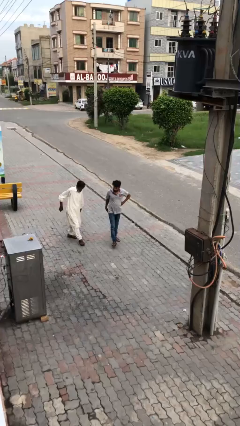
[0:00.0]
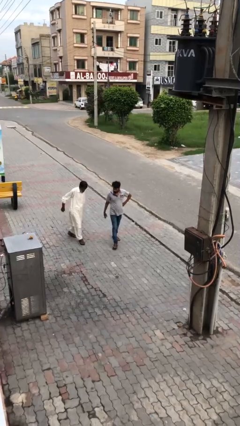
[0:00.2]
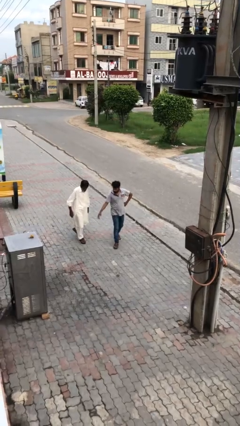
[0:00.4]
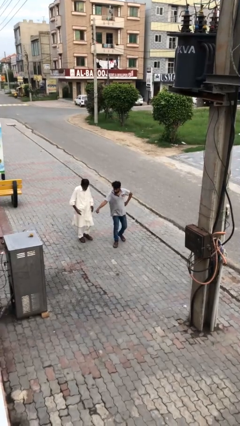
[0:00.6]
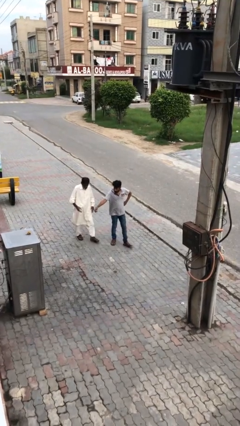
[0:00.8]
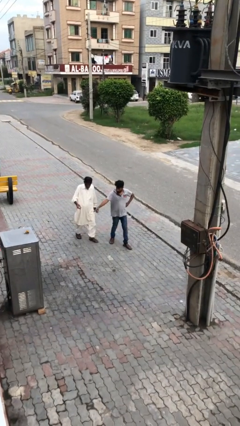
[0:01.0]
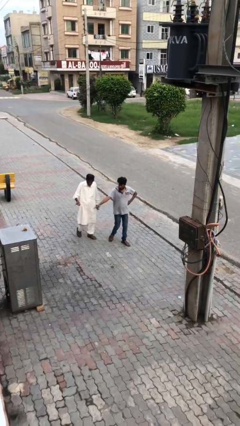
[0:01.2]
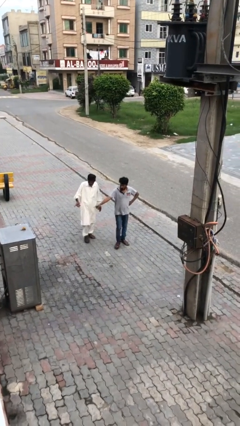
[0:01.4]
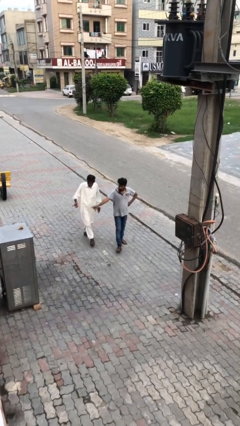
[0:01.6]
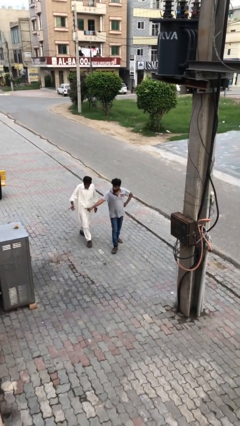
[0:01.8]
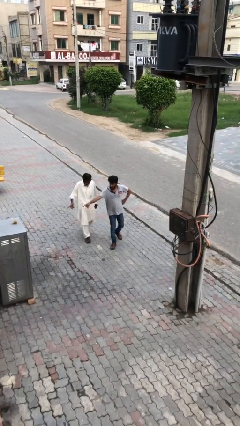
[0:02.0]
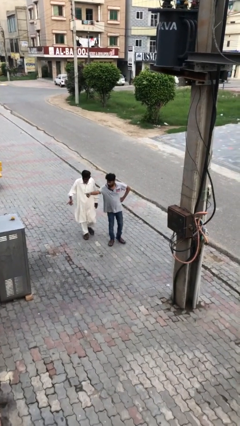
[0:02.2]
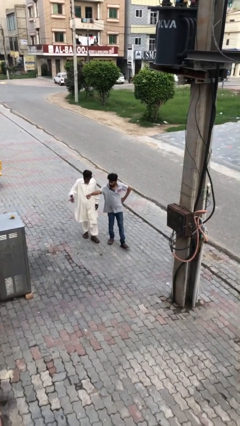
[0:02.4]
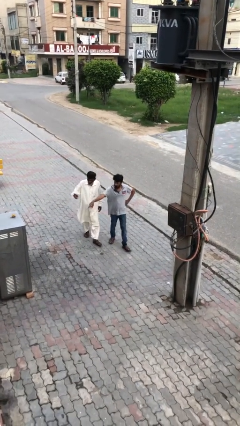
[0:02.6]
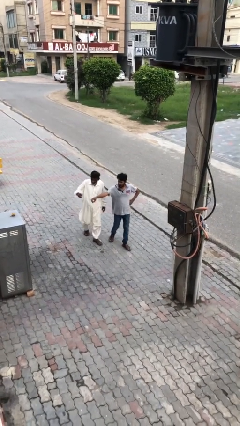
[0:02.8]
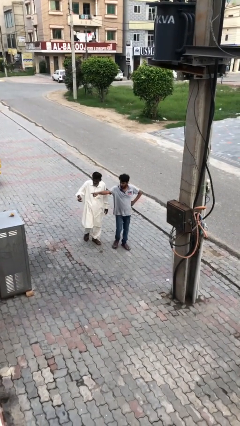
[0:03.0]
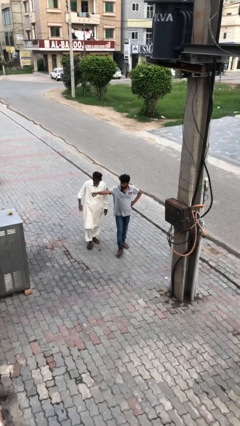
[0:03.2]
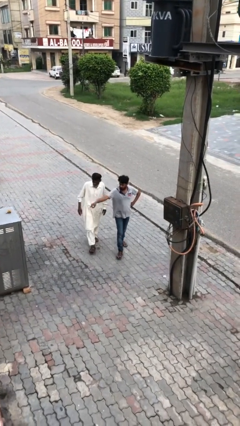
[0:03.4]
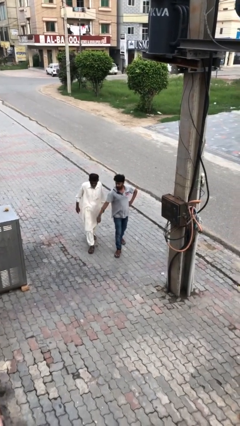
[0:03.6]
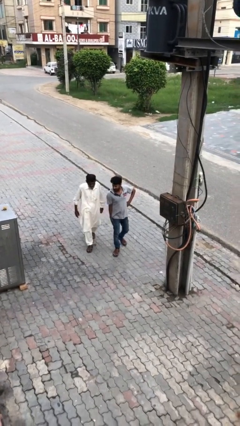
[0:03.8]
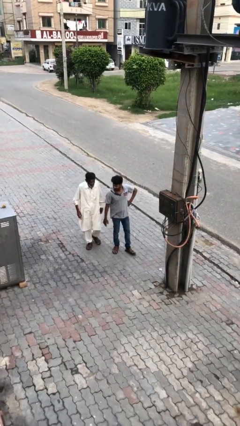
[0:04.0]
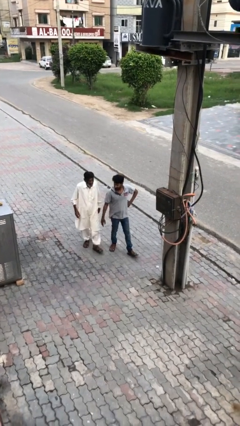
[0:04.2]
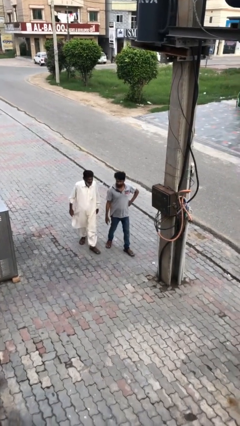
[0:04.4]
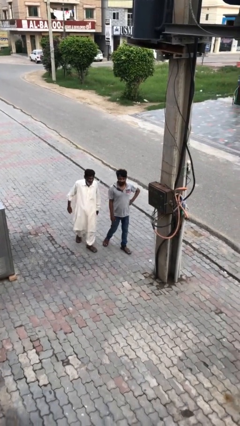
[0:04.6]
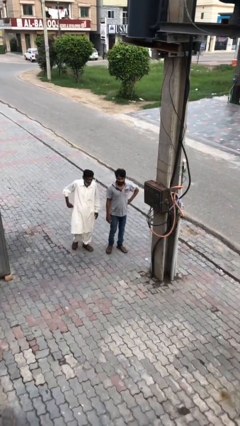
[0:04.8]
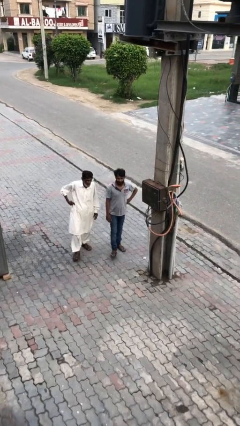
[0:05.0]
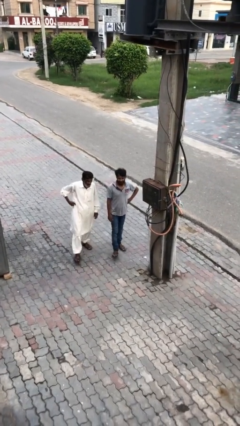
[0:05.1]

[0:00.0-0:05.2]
person talks to person

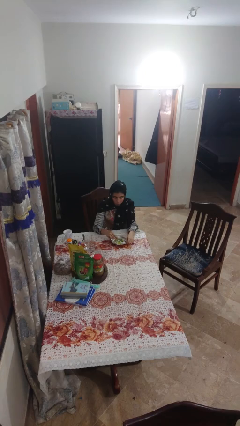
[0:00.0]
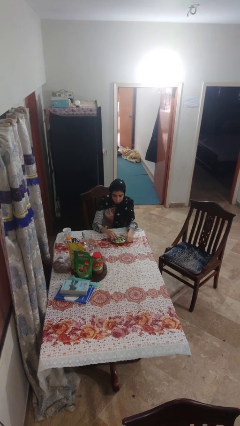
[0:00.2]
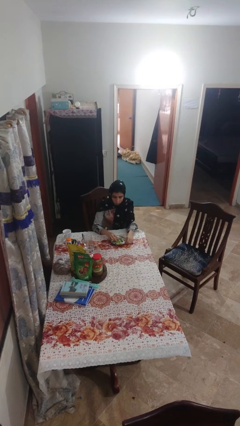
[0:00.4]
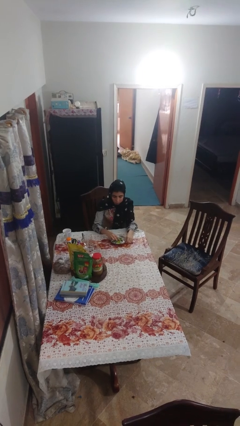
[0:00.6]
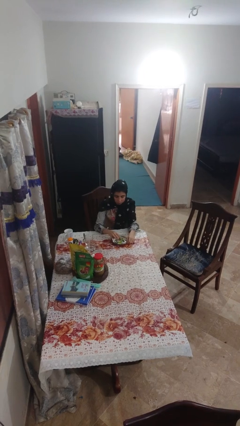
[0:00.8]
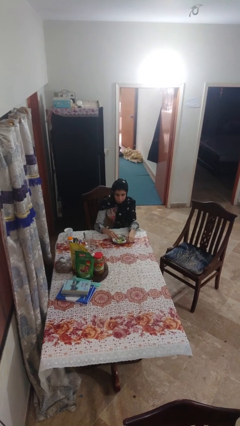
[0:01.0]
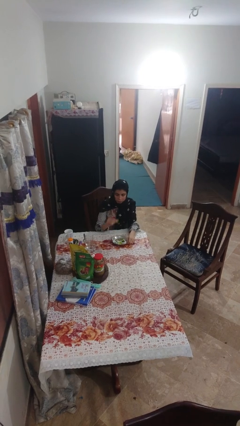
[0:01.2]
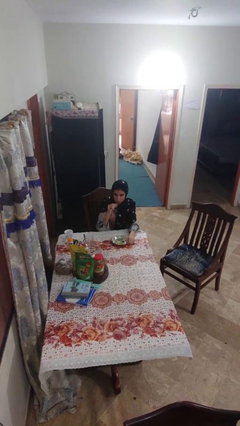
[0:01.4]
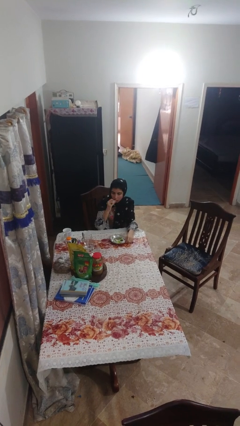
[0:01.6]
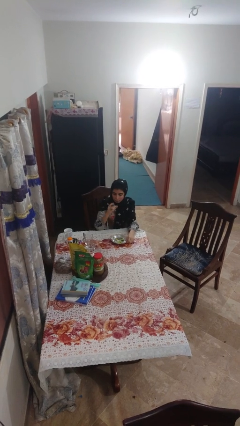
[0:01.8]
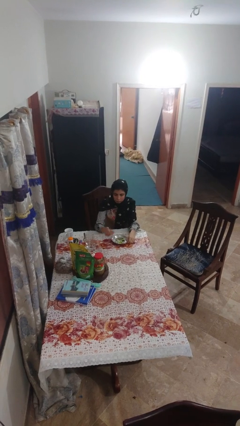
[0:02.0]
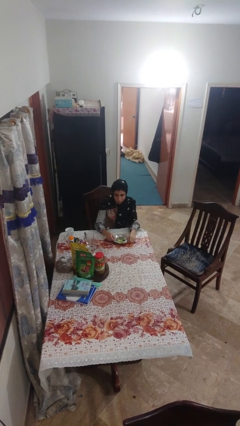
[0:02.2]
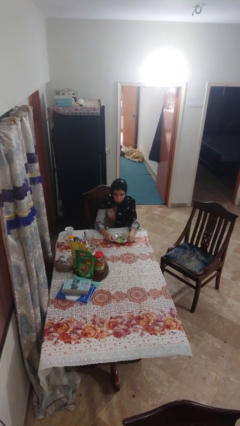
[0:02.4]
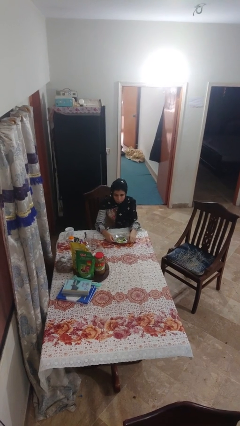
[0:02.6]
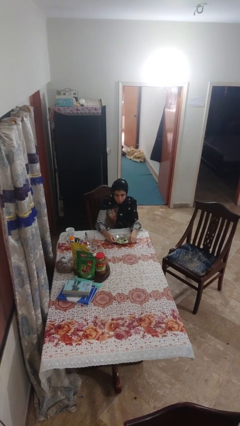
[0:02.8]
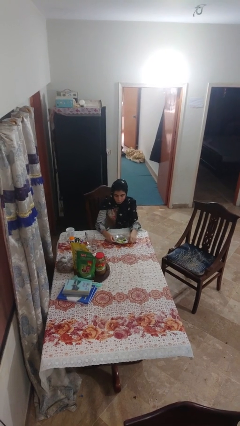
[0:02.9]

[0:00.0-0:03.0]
person eats with hands

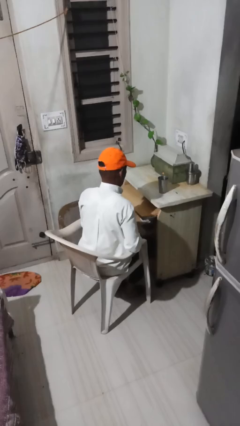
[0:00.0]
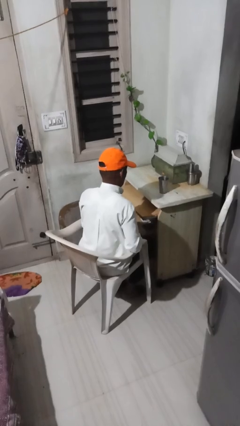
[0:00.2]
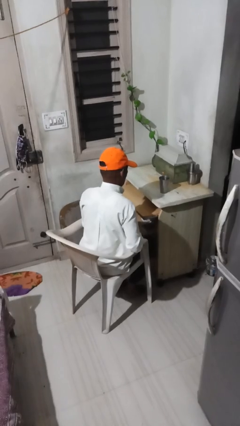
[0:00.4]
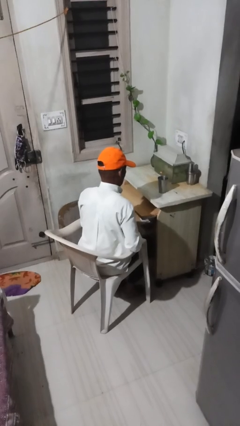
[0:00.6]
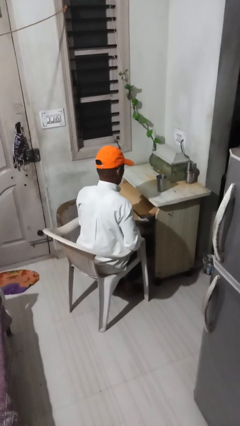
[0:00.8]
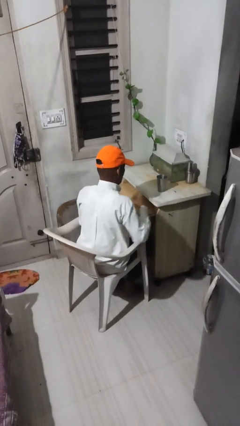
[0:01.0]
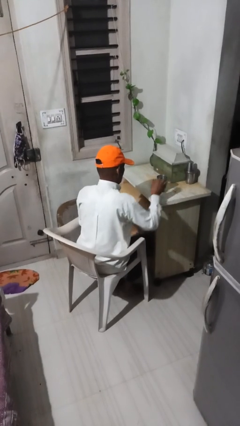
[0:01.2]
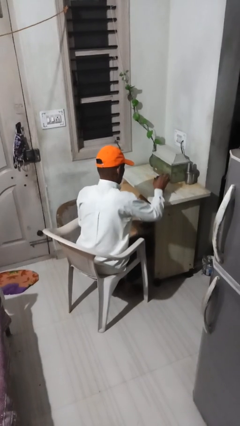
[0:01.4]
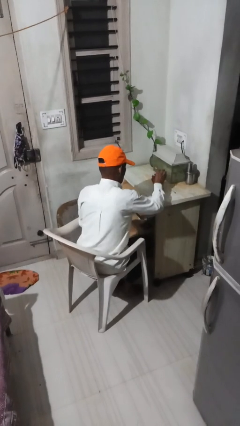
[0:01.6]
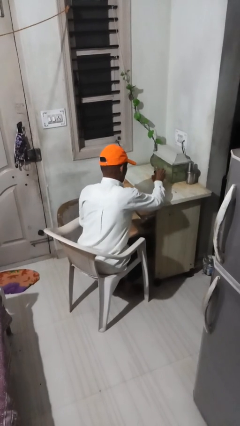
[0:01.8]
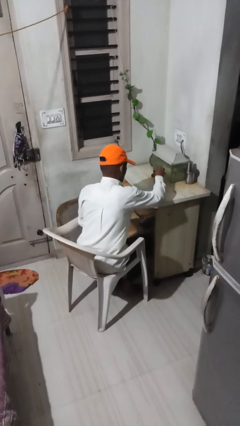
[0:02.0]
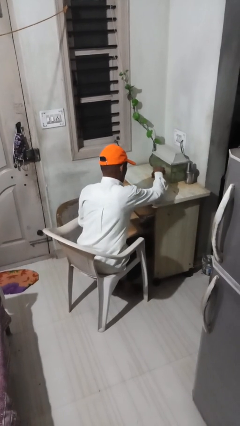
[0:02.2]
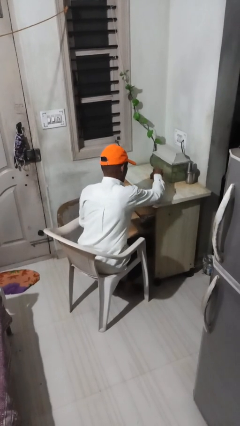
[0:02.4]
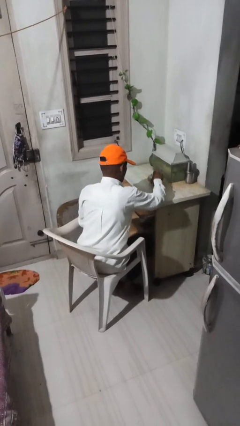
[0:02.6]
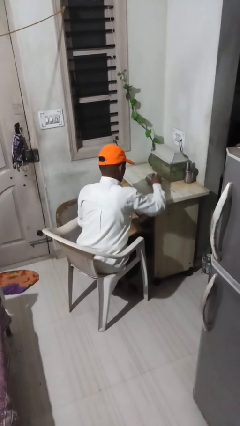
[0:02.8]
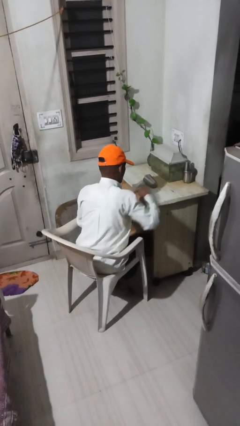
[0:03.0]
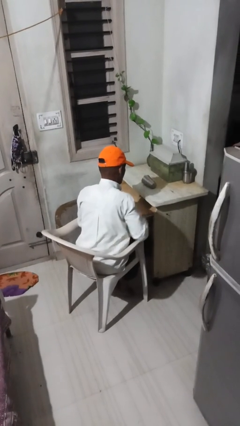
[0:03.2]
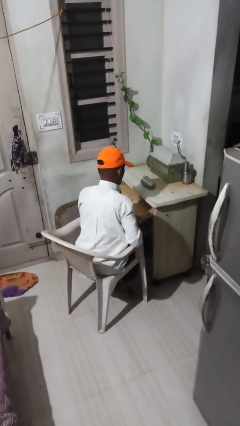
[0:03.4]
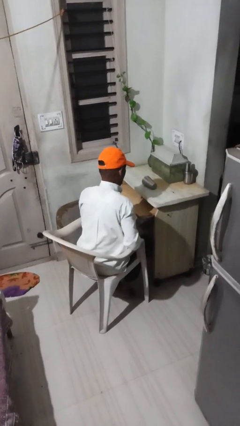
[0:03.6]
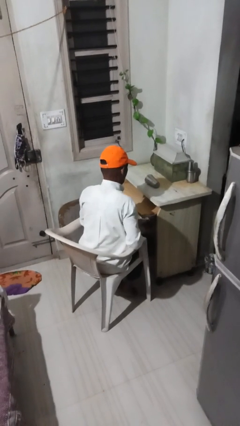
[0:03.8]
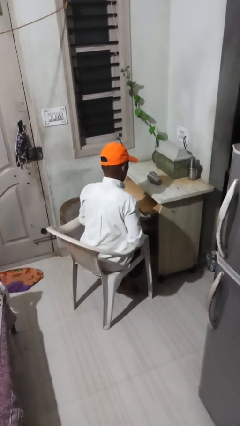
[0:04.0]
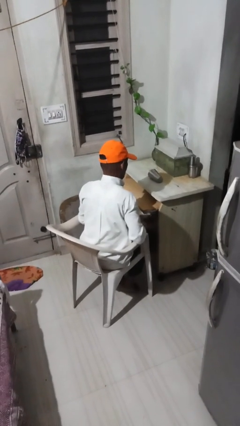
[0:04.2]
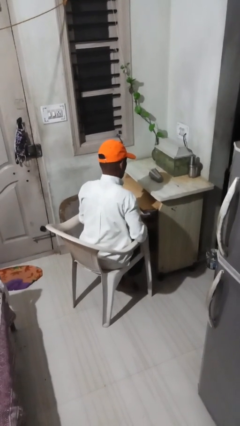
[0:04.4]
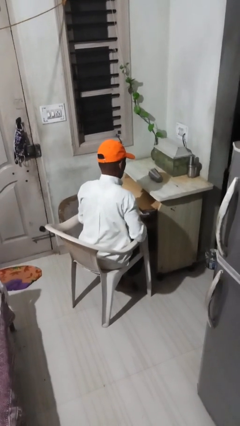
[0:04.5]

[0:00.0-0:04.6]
person knocks over glass

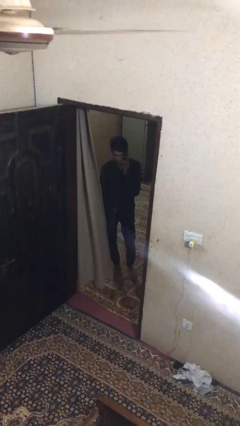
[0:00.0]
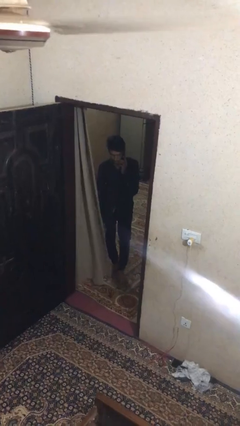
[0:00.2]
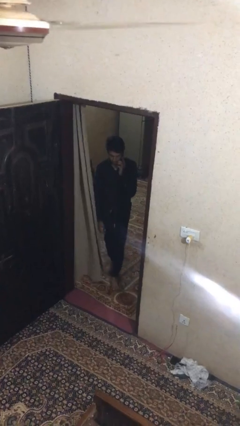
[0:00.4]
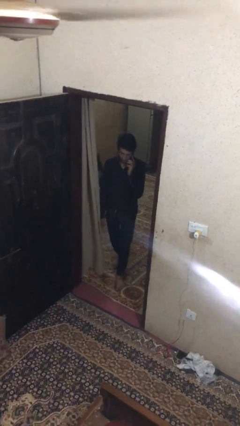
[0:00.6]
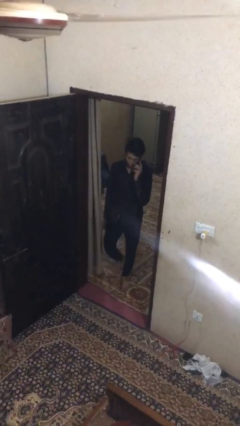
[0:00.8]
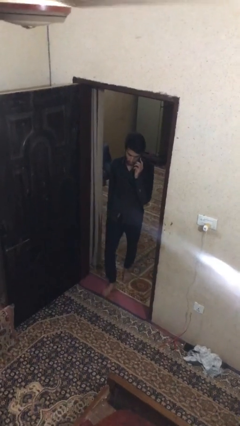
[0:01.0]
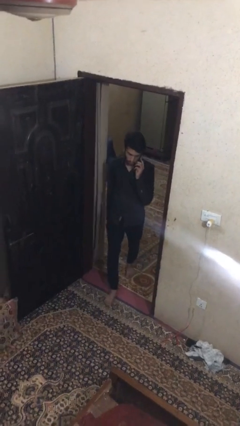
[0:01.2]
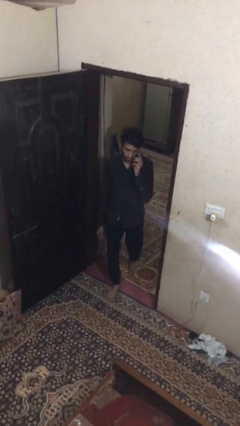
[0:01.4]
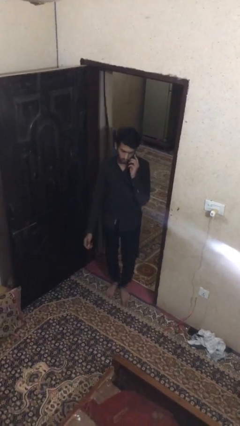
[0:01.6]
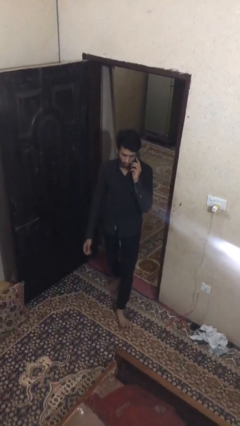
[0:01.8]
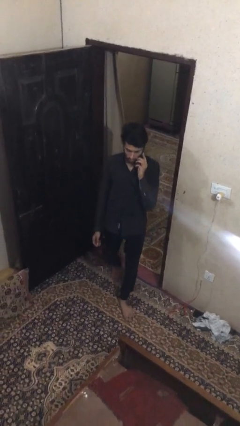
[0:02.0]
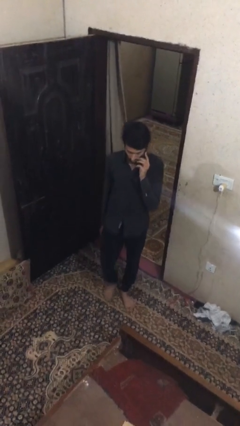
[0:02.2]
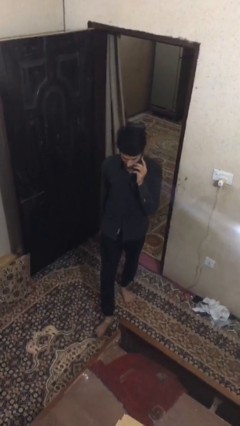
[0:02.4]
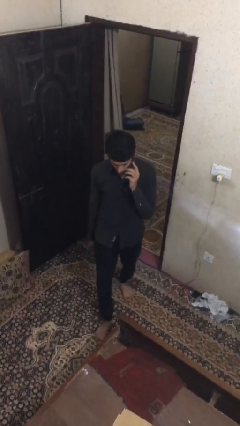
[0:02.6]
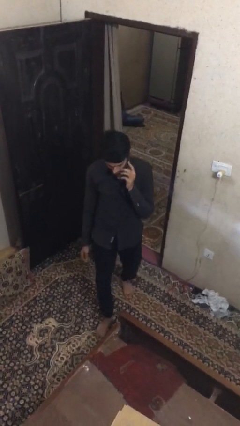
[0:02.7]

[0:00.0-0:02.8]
person enters scene through structure

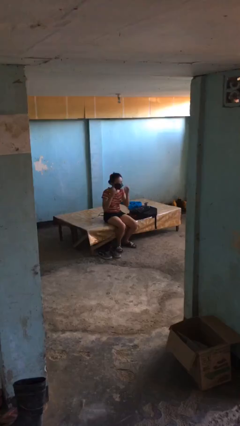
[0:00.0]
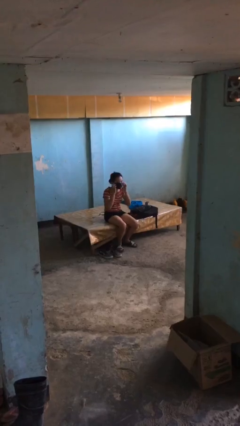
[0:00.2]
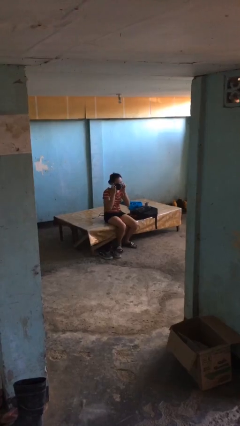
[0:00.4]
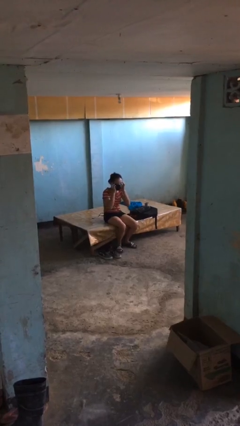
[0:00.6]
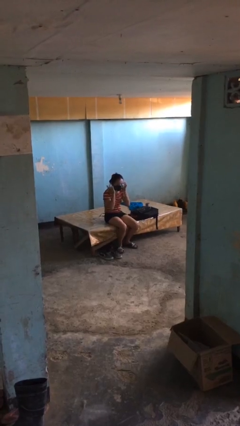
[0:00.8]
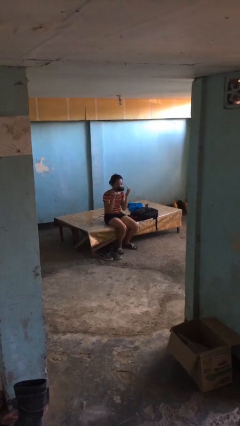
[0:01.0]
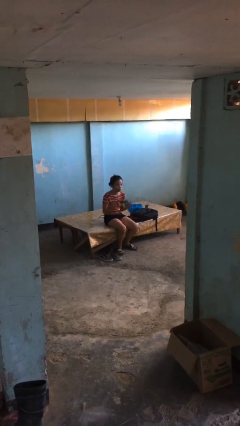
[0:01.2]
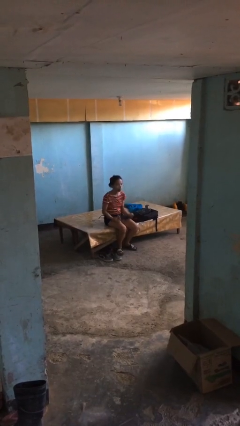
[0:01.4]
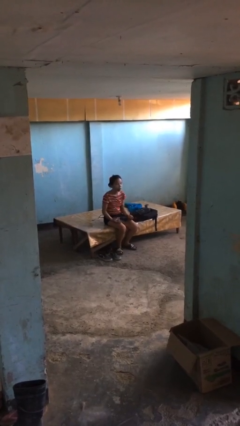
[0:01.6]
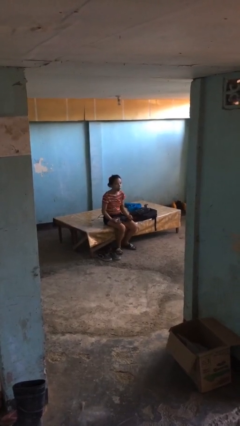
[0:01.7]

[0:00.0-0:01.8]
person takes off facemask

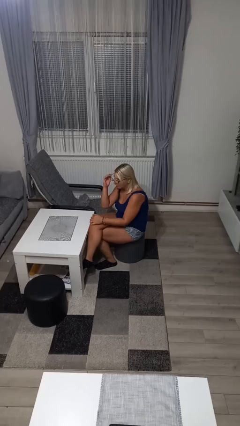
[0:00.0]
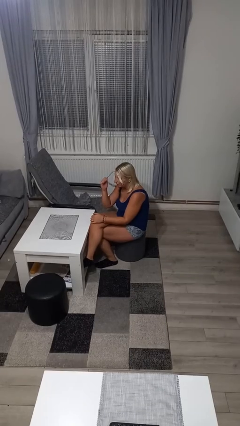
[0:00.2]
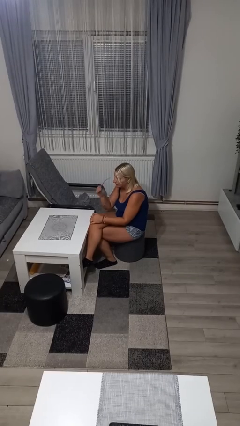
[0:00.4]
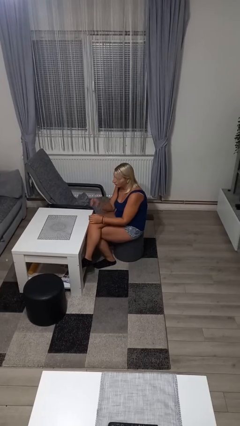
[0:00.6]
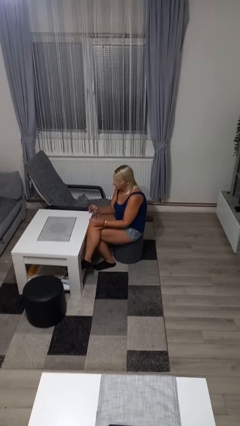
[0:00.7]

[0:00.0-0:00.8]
person takes off glasses
